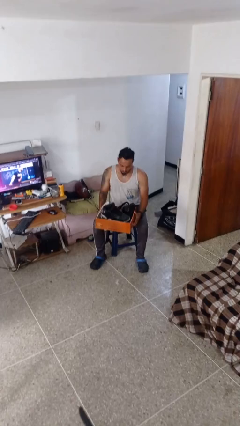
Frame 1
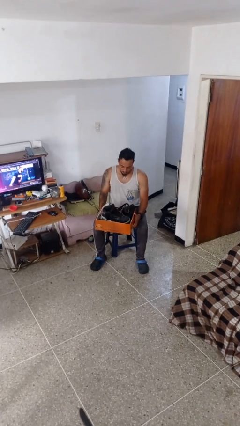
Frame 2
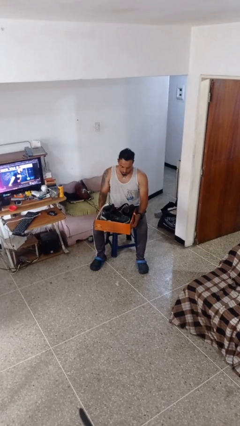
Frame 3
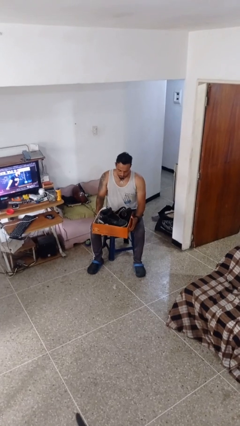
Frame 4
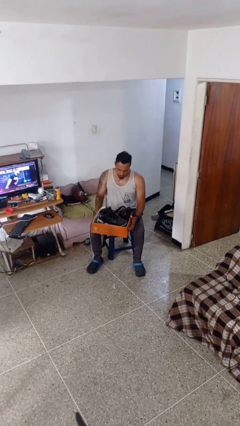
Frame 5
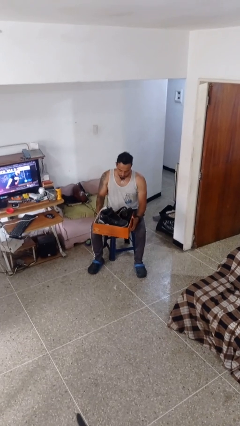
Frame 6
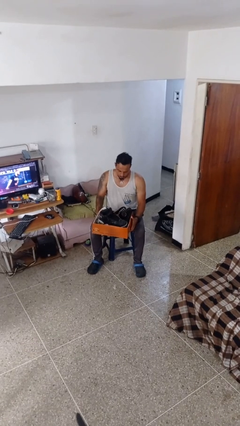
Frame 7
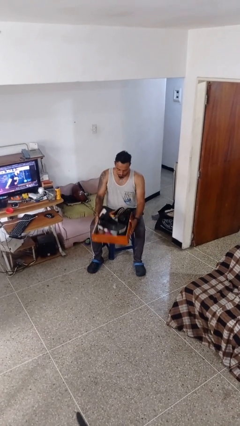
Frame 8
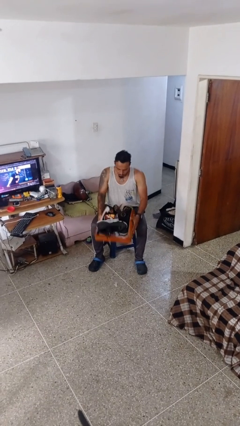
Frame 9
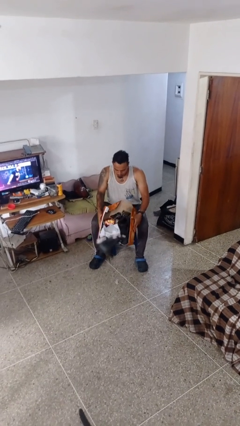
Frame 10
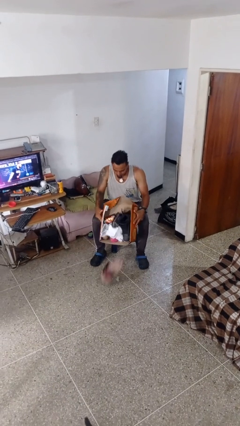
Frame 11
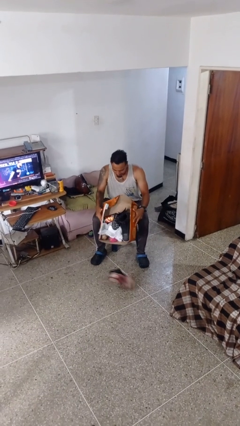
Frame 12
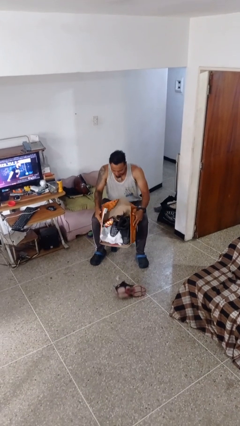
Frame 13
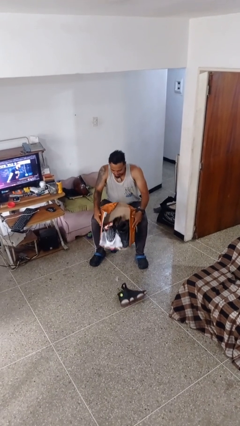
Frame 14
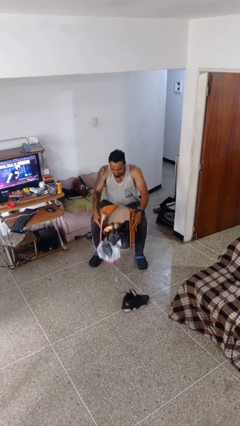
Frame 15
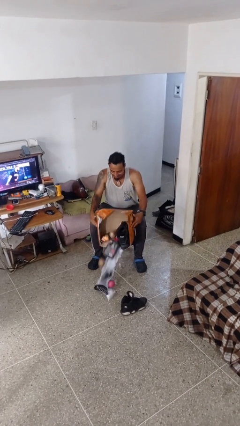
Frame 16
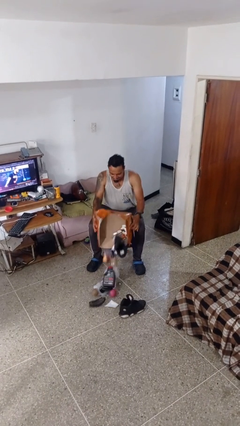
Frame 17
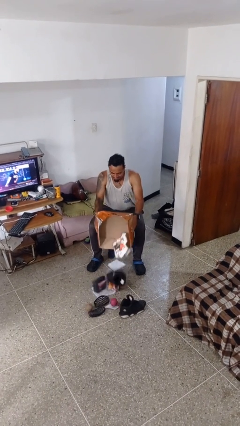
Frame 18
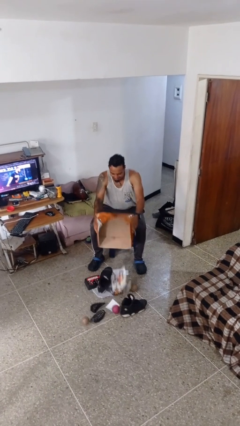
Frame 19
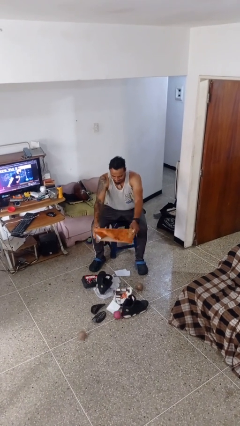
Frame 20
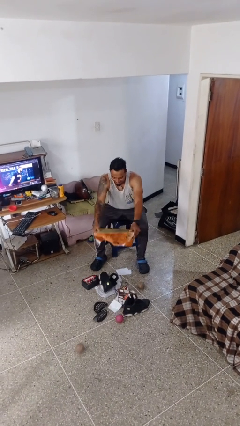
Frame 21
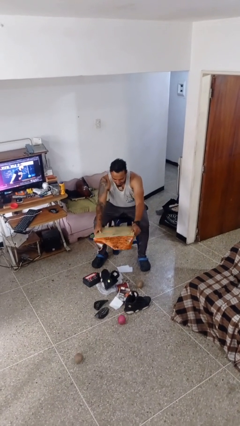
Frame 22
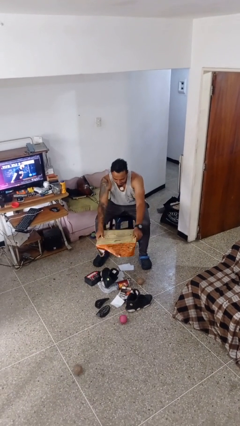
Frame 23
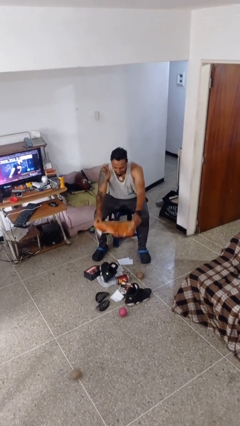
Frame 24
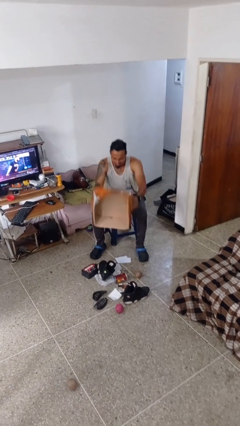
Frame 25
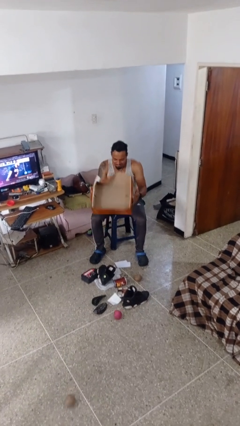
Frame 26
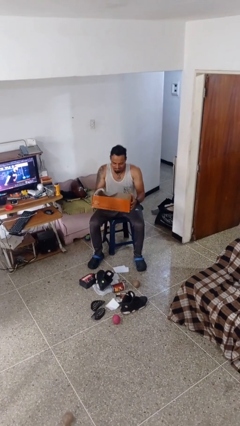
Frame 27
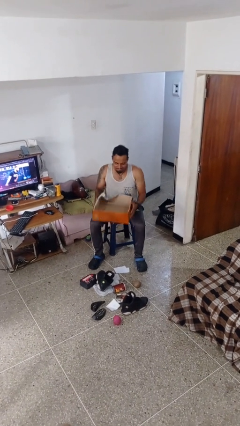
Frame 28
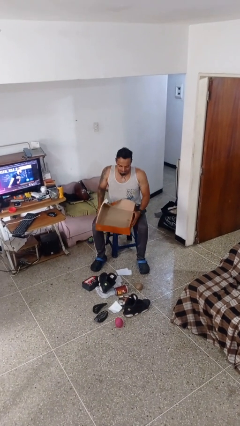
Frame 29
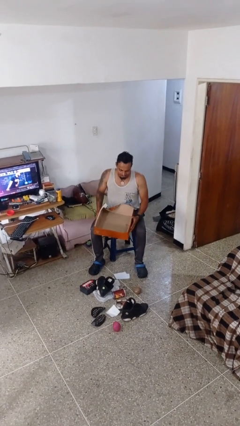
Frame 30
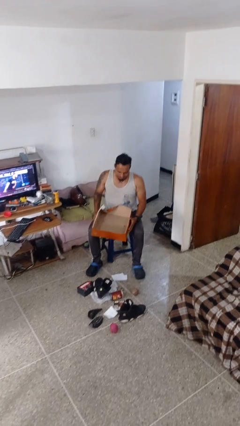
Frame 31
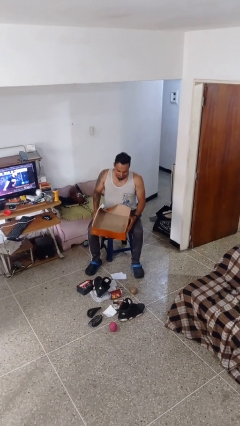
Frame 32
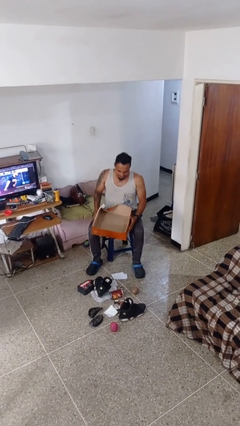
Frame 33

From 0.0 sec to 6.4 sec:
person unloads box onto floor

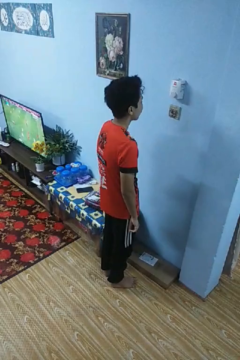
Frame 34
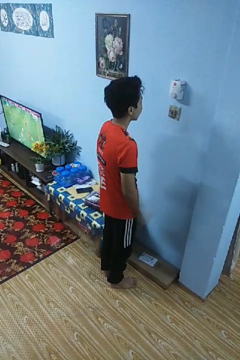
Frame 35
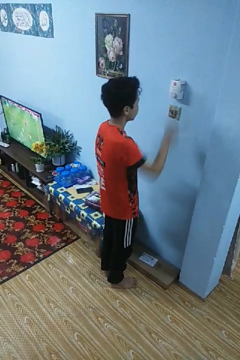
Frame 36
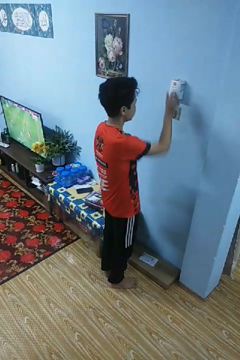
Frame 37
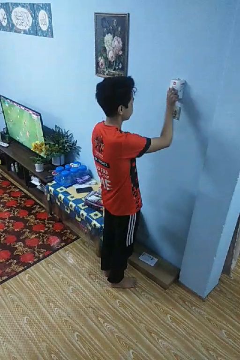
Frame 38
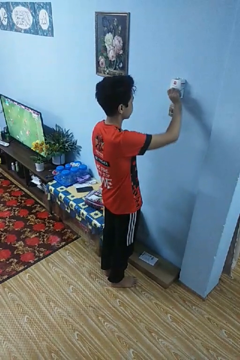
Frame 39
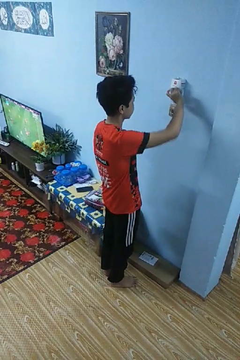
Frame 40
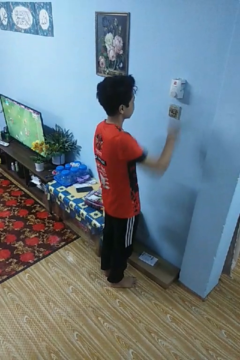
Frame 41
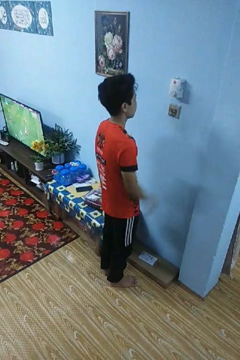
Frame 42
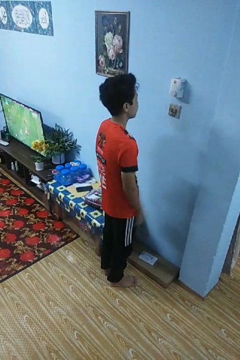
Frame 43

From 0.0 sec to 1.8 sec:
person adjusts thermostat

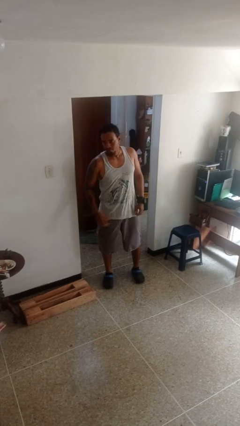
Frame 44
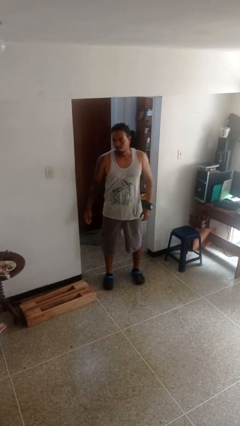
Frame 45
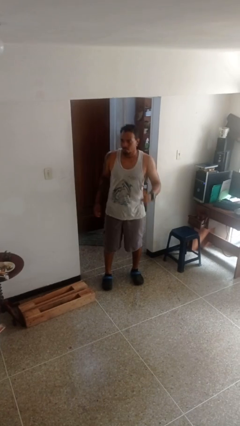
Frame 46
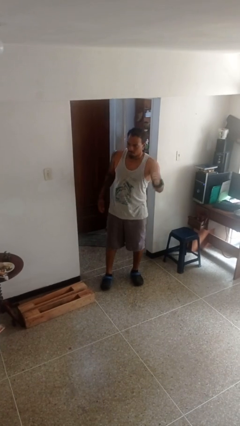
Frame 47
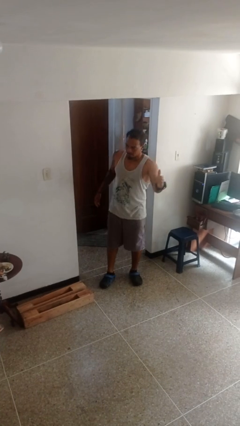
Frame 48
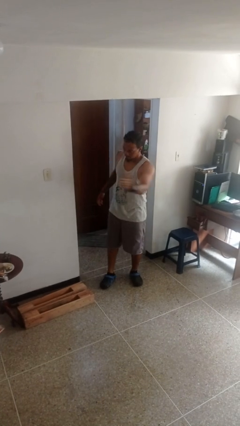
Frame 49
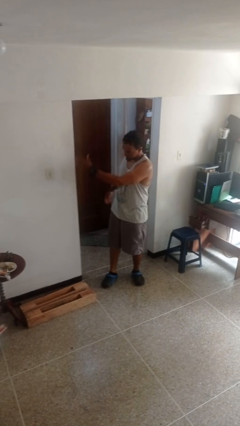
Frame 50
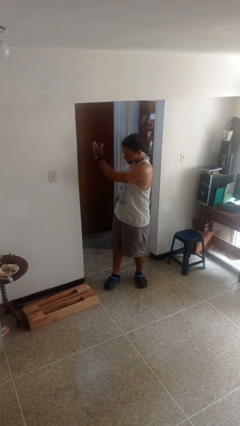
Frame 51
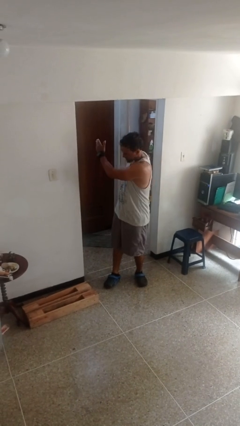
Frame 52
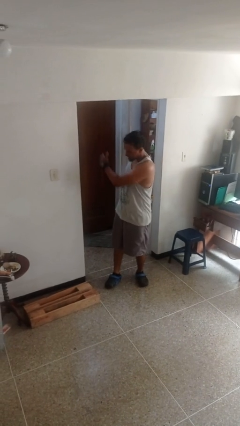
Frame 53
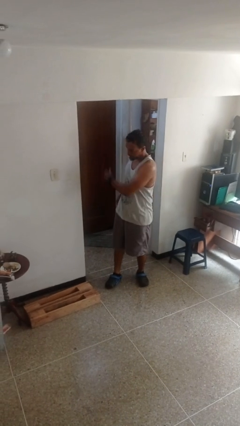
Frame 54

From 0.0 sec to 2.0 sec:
person gestures swipe right

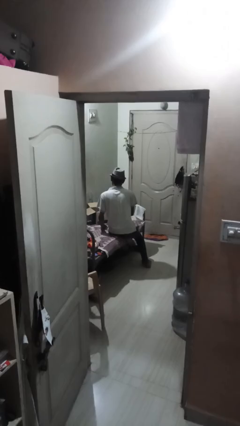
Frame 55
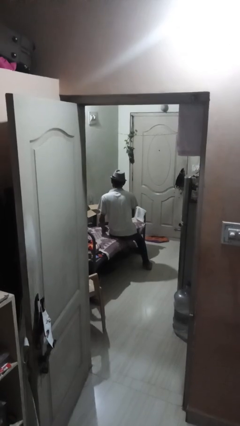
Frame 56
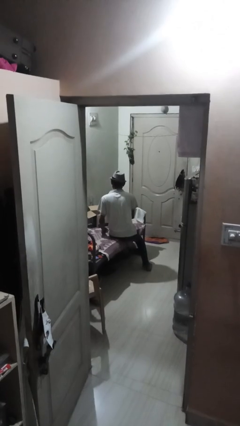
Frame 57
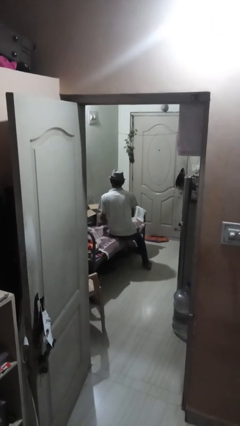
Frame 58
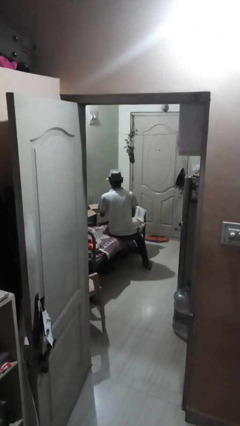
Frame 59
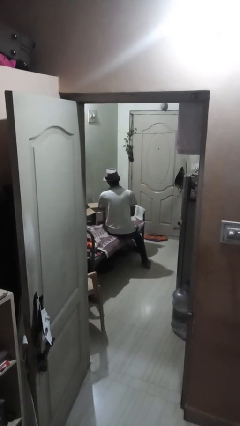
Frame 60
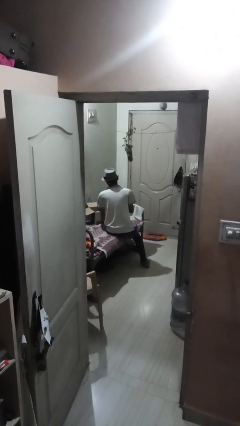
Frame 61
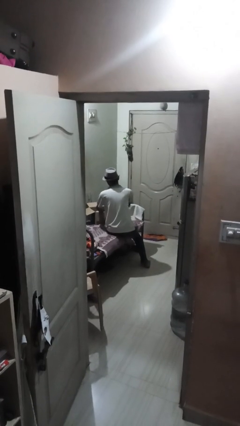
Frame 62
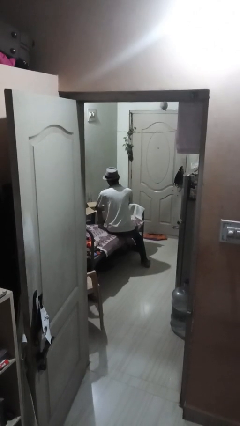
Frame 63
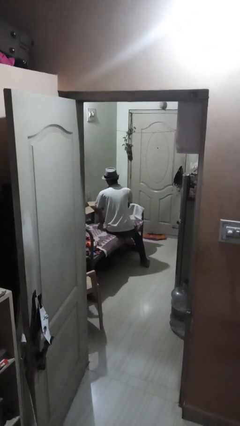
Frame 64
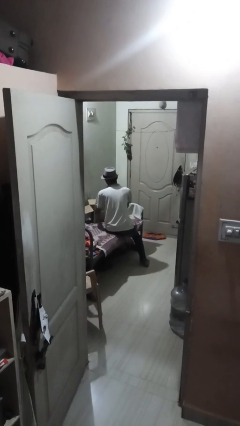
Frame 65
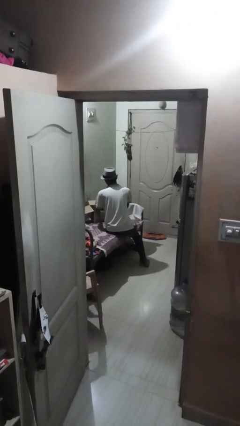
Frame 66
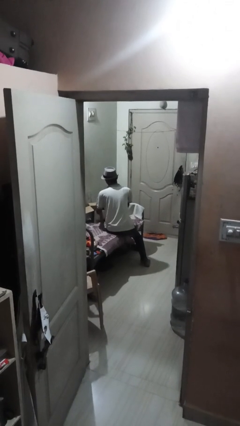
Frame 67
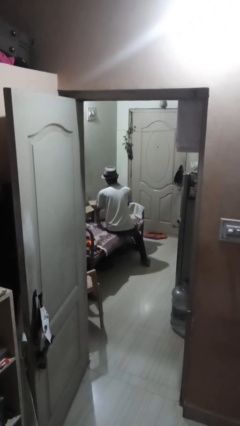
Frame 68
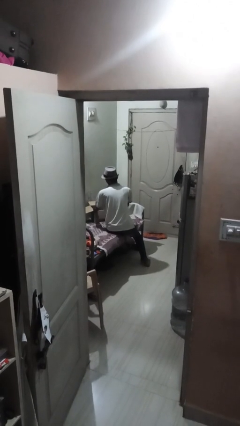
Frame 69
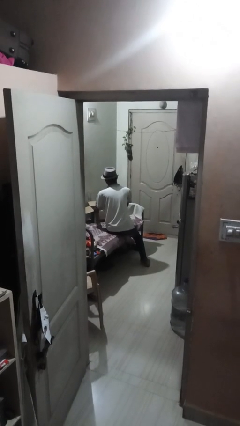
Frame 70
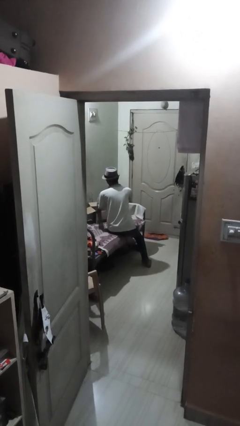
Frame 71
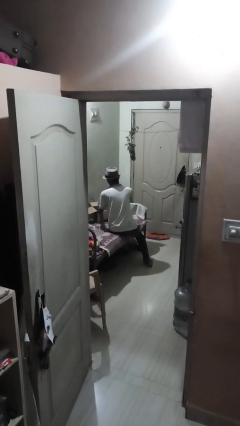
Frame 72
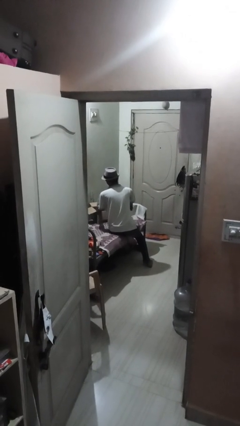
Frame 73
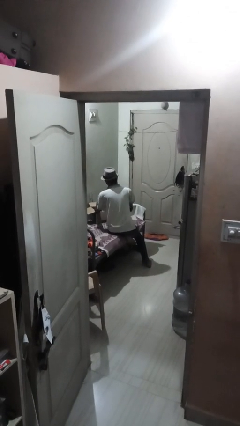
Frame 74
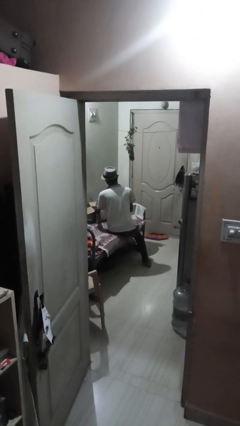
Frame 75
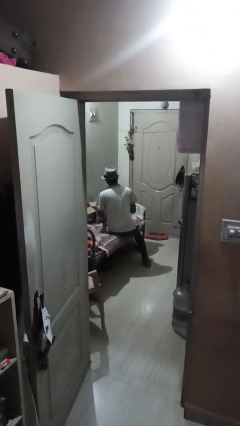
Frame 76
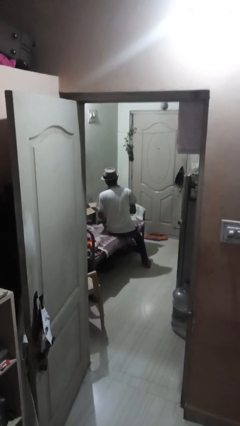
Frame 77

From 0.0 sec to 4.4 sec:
person searches in box

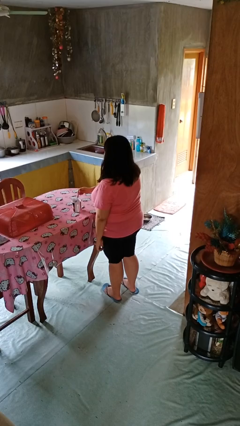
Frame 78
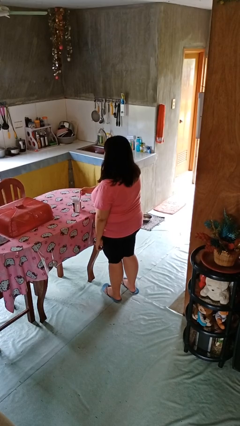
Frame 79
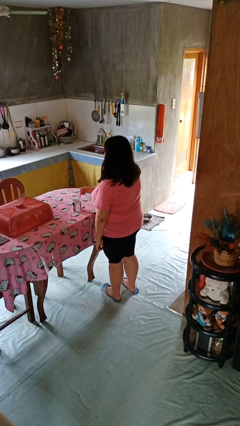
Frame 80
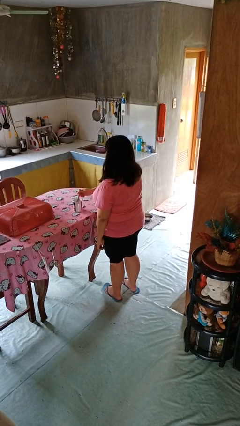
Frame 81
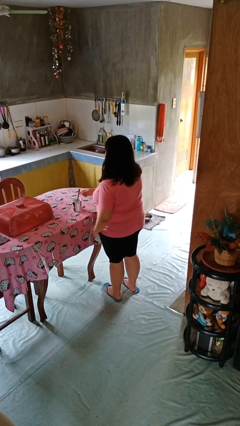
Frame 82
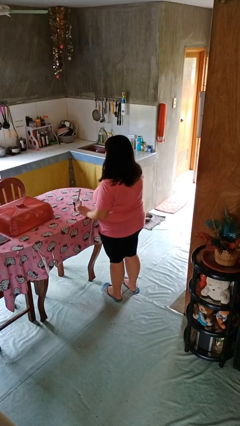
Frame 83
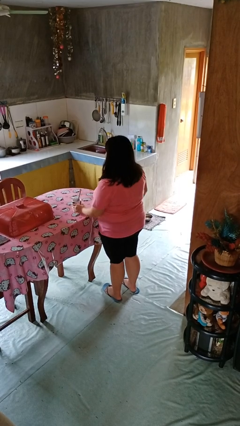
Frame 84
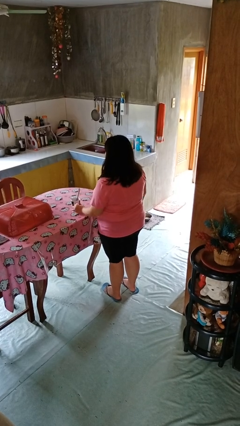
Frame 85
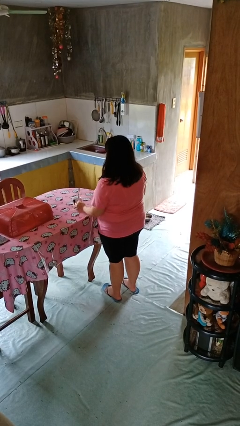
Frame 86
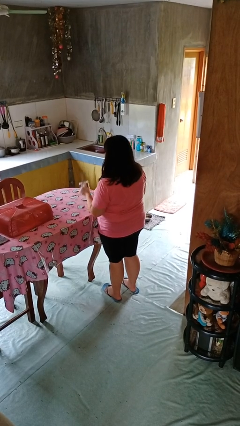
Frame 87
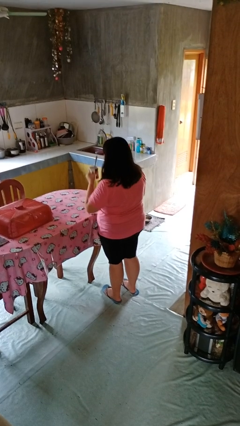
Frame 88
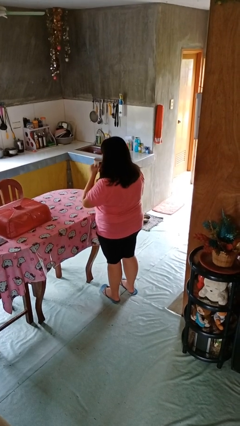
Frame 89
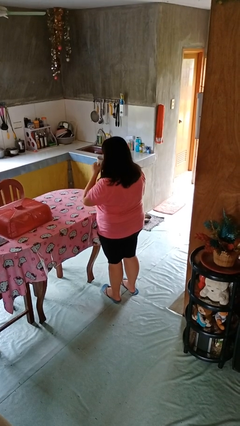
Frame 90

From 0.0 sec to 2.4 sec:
person stirs mug

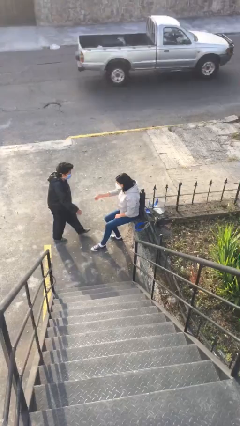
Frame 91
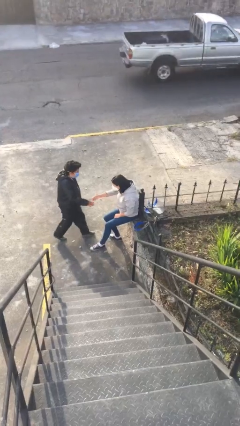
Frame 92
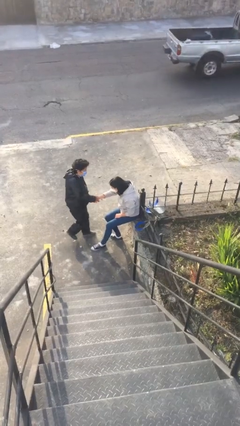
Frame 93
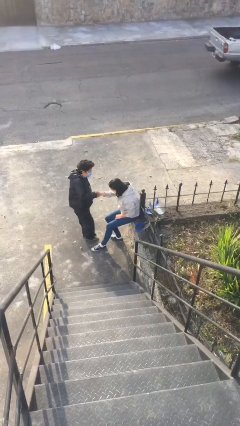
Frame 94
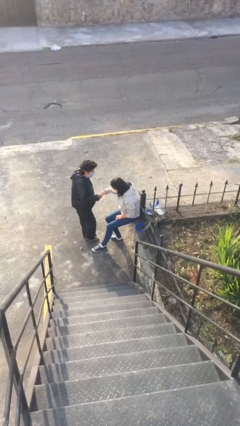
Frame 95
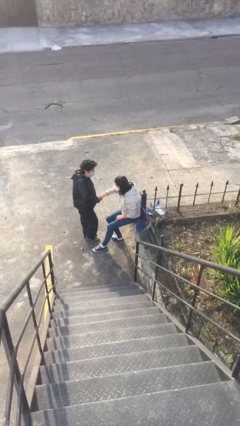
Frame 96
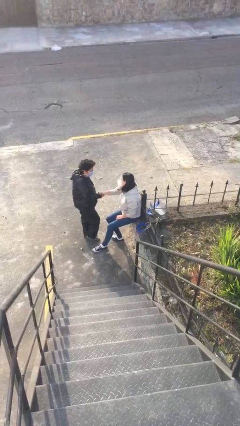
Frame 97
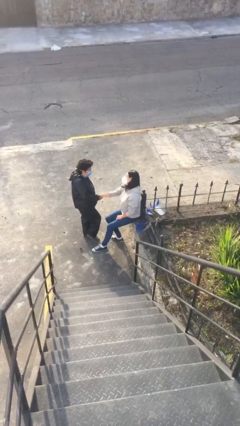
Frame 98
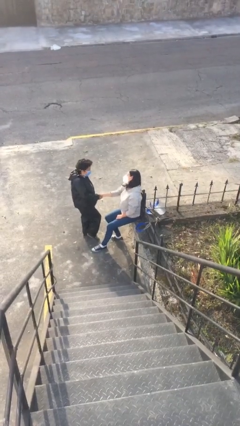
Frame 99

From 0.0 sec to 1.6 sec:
person shakes hand
